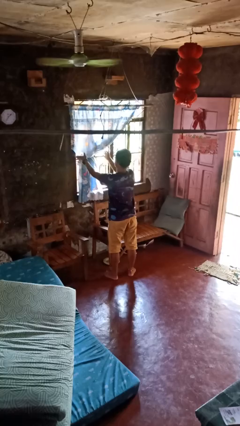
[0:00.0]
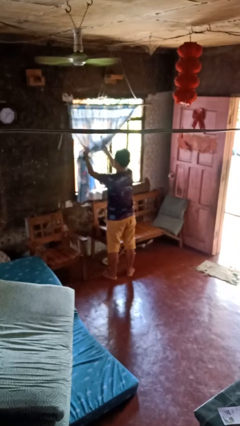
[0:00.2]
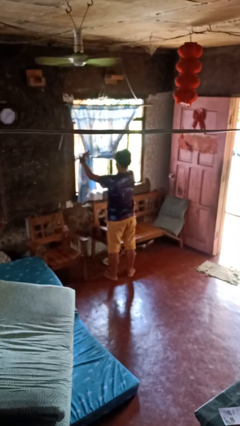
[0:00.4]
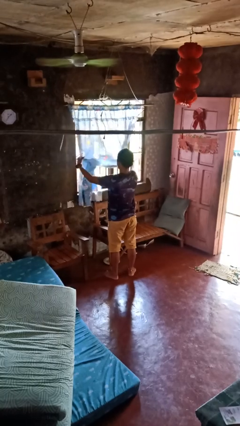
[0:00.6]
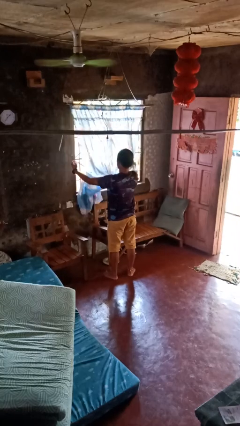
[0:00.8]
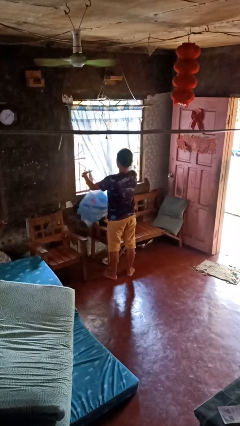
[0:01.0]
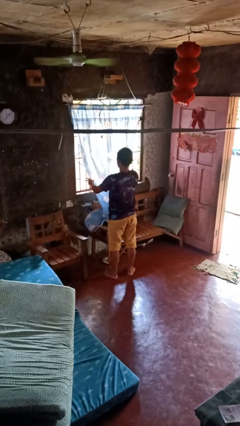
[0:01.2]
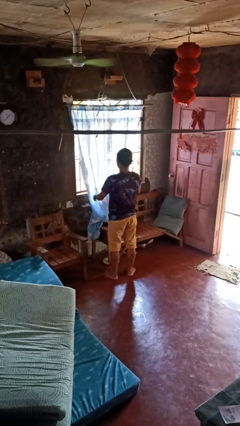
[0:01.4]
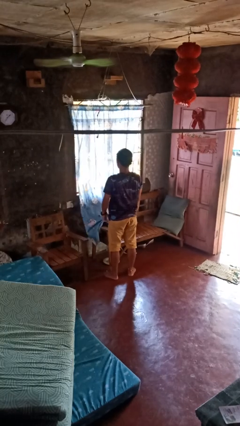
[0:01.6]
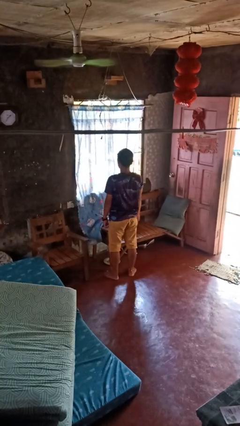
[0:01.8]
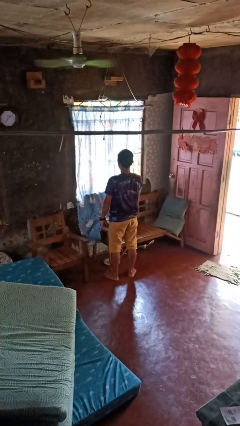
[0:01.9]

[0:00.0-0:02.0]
person closes curtains

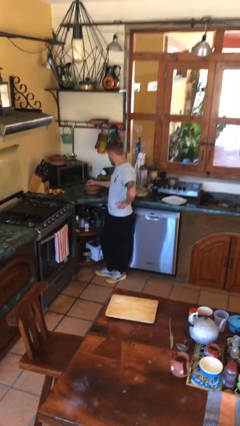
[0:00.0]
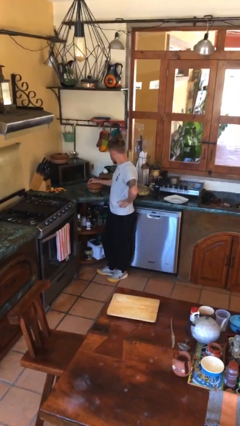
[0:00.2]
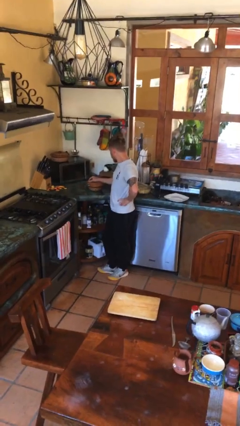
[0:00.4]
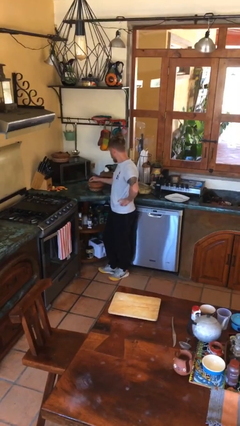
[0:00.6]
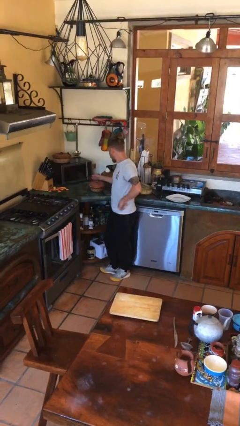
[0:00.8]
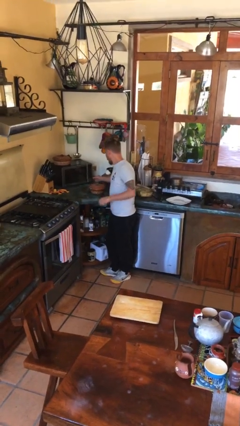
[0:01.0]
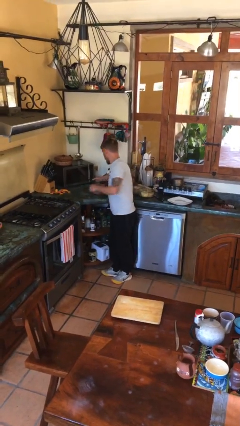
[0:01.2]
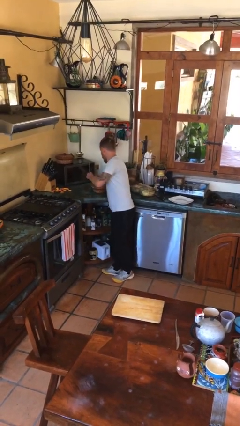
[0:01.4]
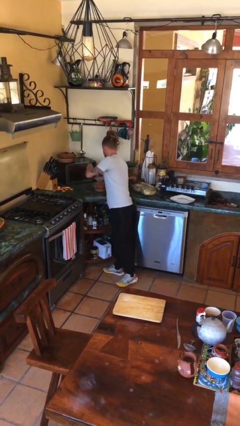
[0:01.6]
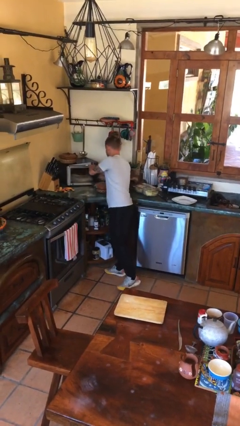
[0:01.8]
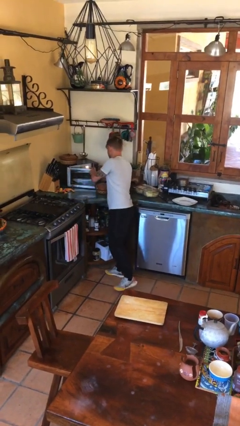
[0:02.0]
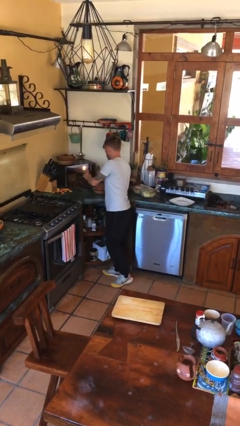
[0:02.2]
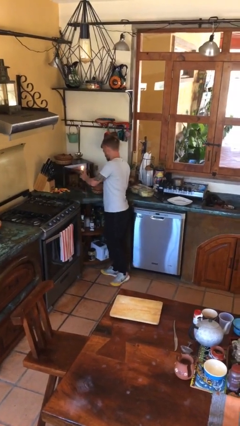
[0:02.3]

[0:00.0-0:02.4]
person opens microwave

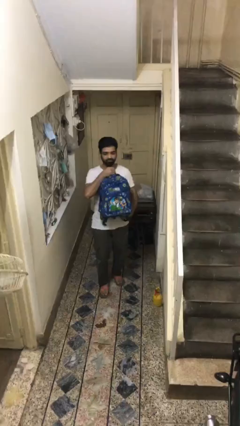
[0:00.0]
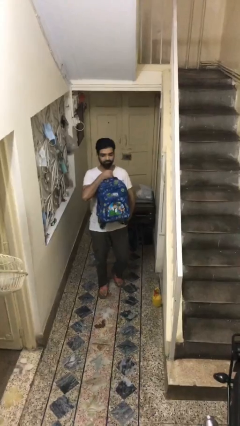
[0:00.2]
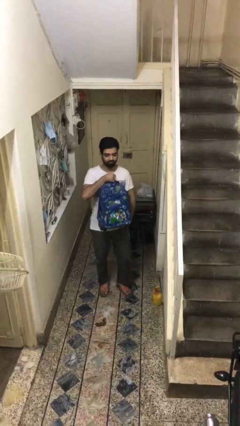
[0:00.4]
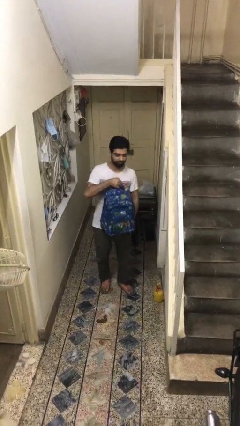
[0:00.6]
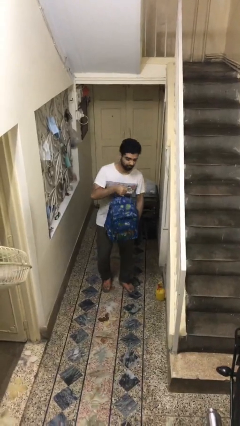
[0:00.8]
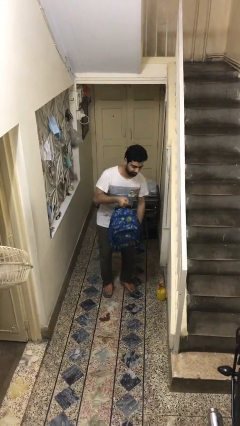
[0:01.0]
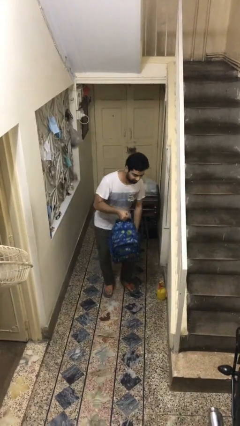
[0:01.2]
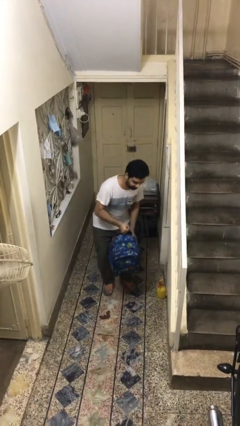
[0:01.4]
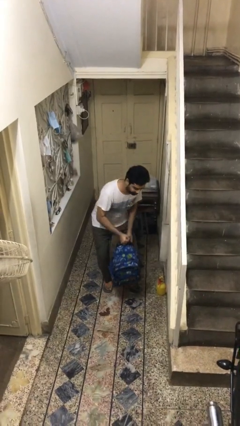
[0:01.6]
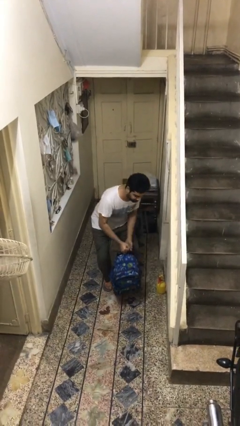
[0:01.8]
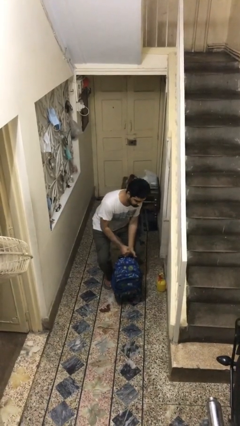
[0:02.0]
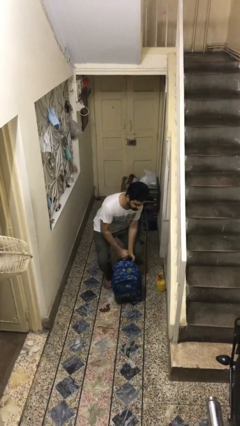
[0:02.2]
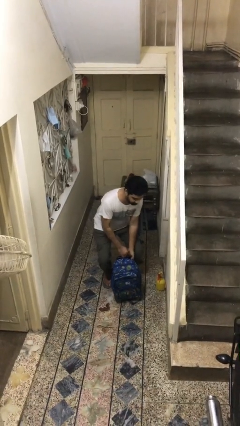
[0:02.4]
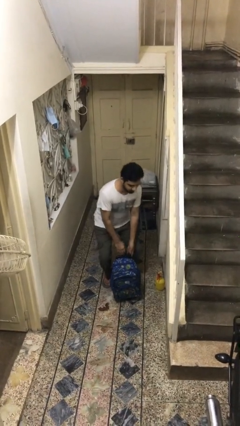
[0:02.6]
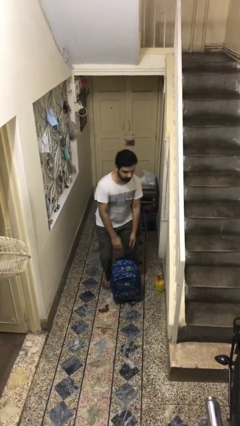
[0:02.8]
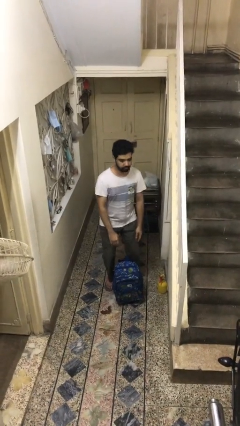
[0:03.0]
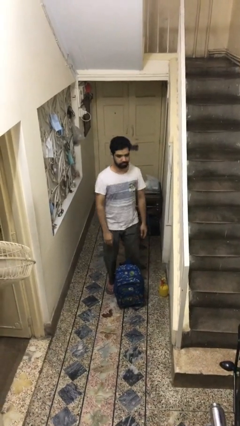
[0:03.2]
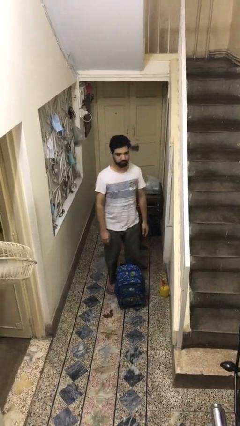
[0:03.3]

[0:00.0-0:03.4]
person puts down object on floor

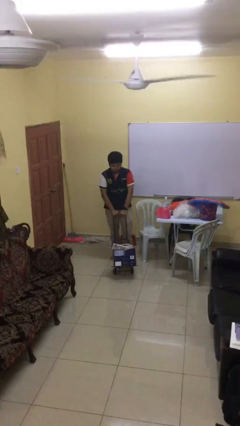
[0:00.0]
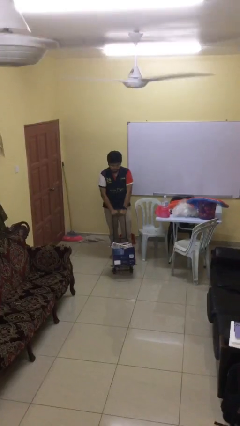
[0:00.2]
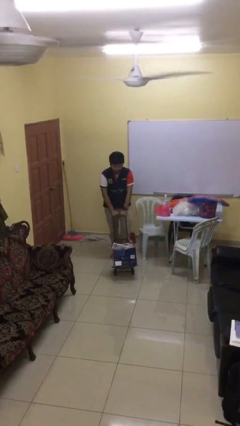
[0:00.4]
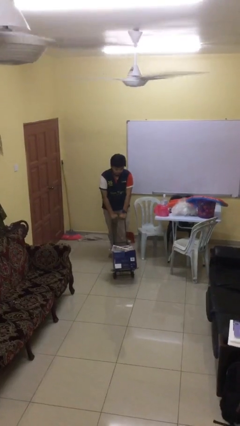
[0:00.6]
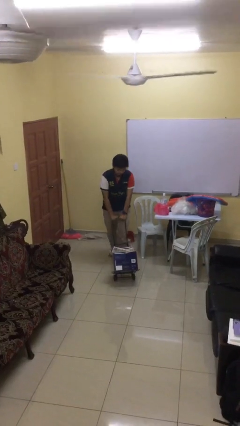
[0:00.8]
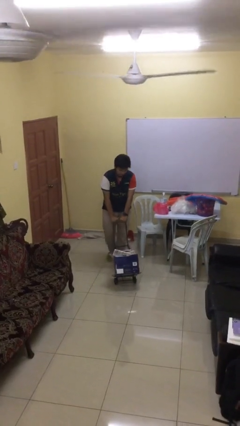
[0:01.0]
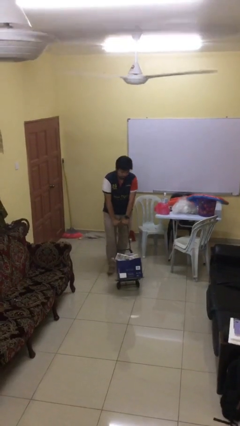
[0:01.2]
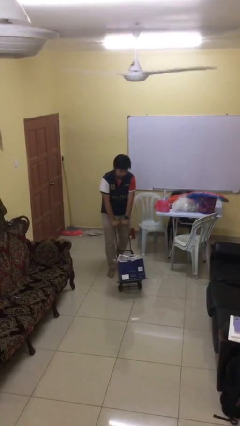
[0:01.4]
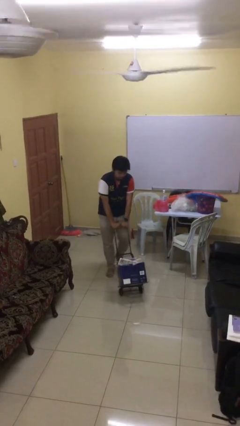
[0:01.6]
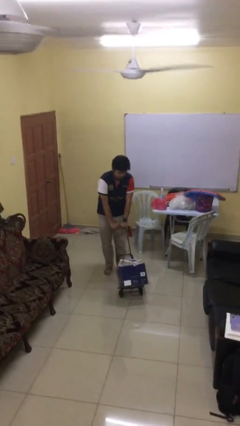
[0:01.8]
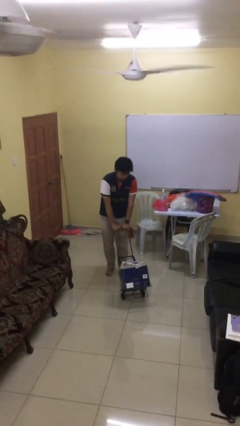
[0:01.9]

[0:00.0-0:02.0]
person pushes wheeled cart

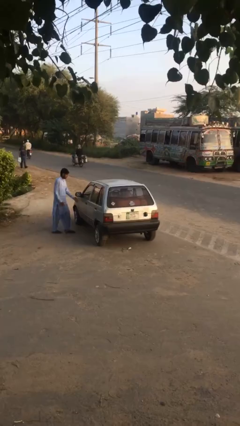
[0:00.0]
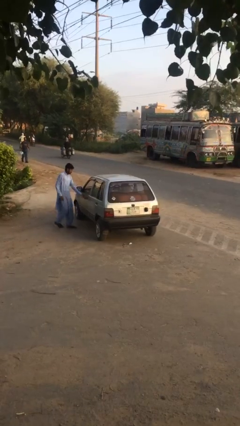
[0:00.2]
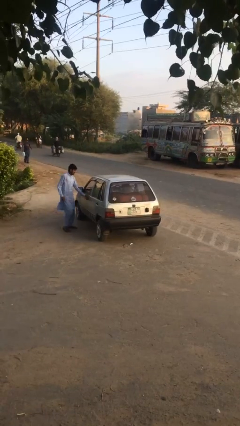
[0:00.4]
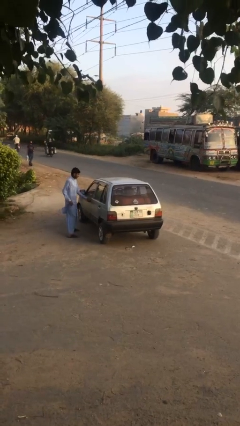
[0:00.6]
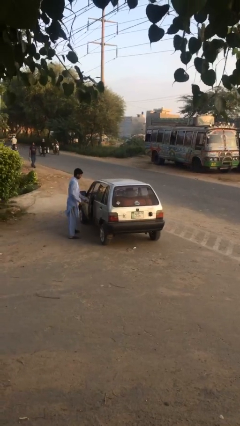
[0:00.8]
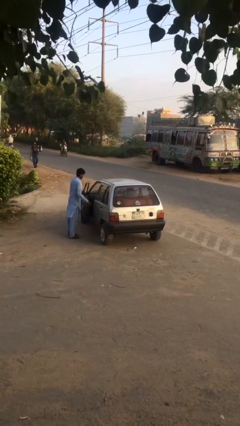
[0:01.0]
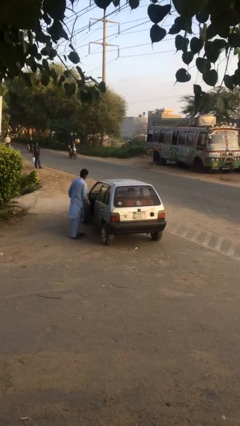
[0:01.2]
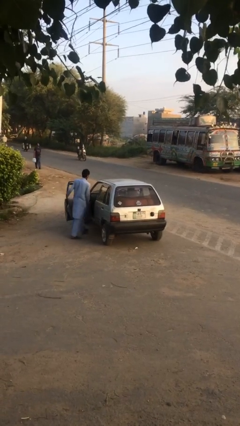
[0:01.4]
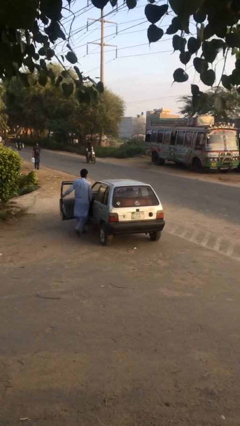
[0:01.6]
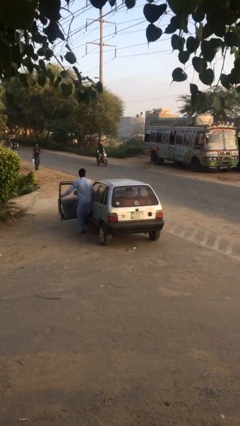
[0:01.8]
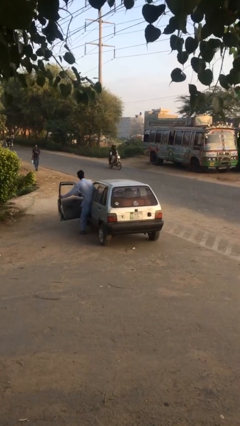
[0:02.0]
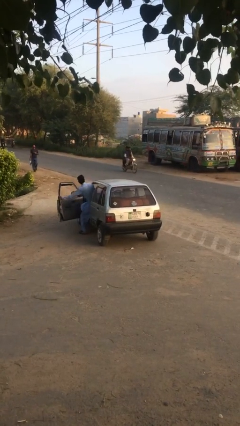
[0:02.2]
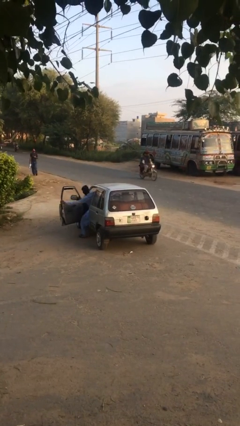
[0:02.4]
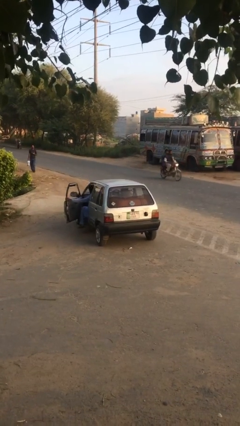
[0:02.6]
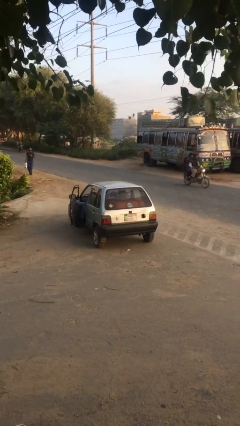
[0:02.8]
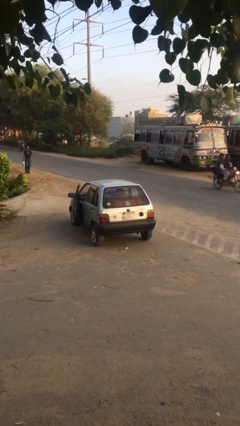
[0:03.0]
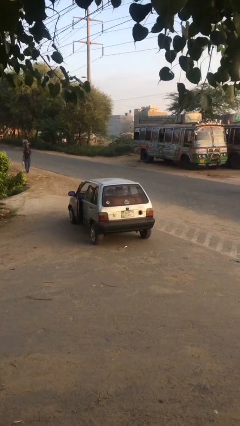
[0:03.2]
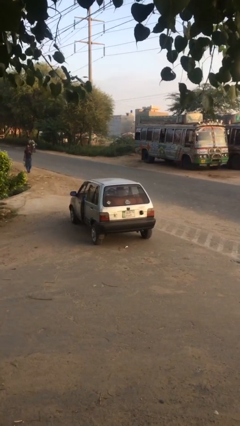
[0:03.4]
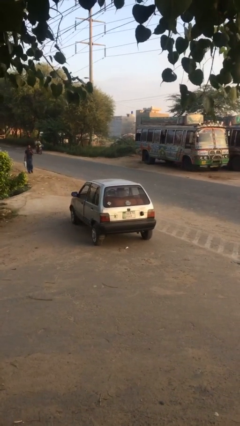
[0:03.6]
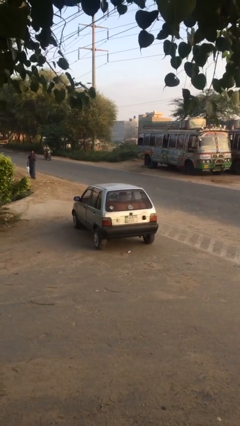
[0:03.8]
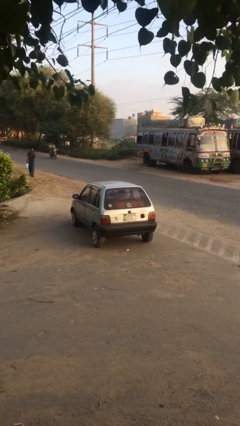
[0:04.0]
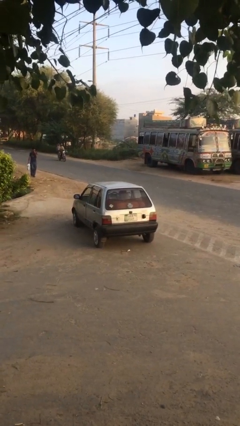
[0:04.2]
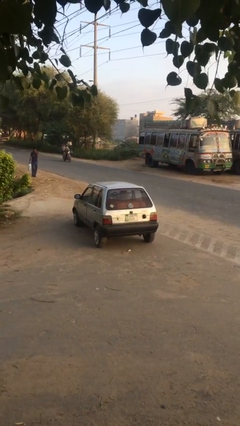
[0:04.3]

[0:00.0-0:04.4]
car picks up person

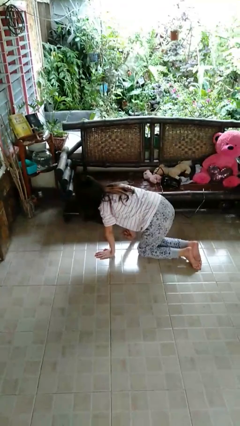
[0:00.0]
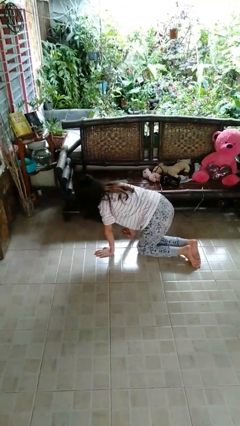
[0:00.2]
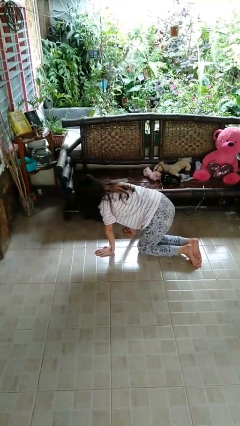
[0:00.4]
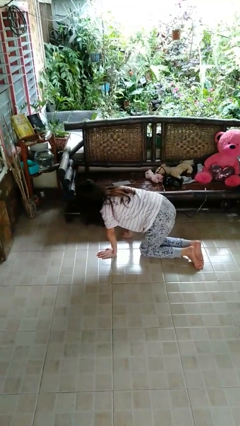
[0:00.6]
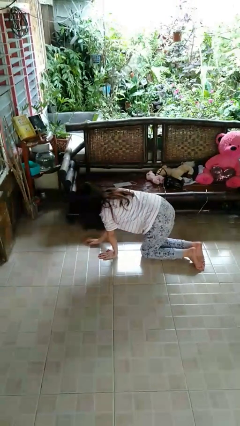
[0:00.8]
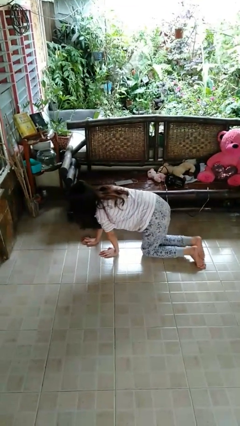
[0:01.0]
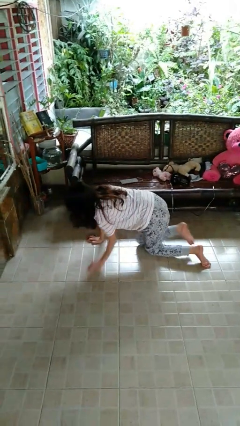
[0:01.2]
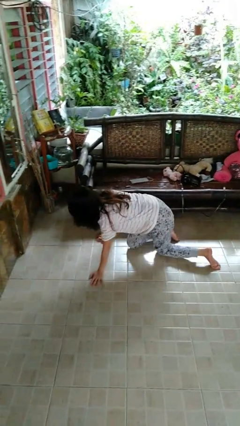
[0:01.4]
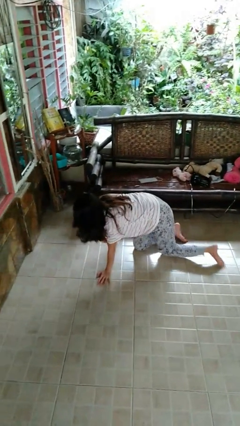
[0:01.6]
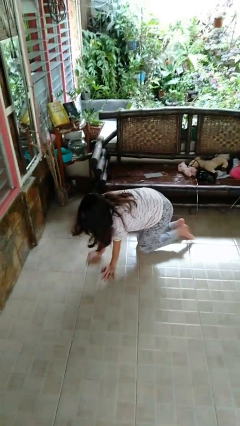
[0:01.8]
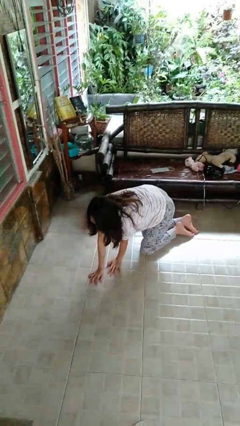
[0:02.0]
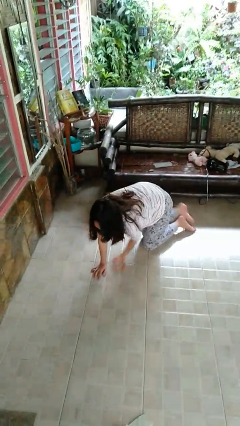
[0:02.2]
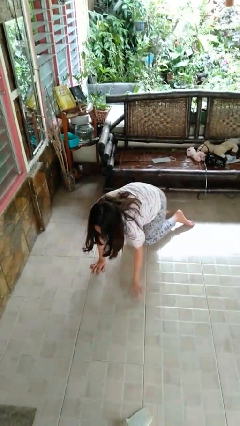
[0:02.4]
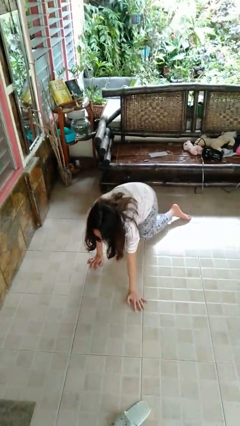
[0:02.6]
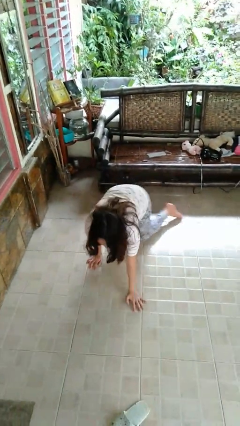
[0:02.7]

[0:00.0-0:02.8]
person crawls

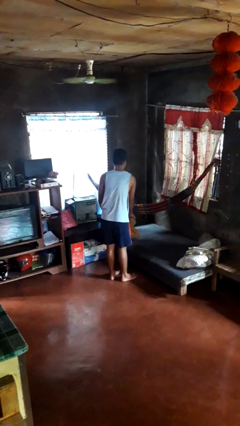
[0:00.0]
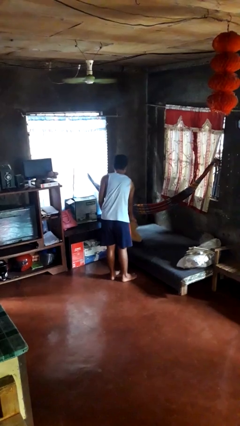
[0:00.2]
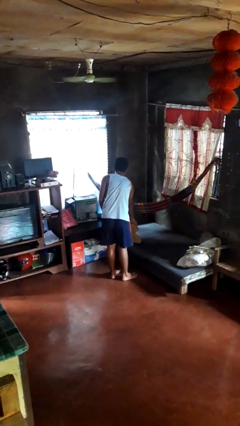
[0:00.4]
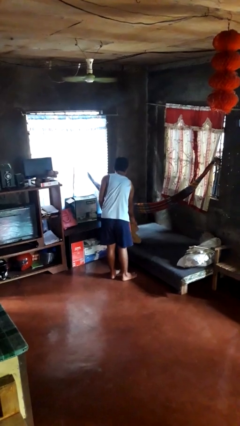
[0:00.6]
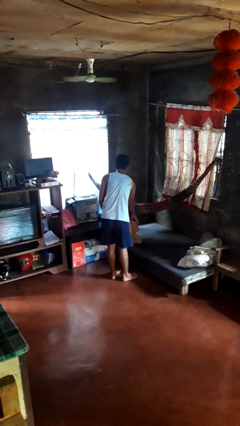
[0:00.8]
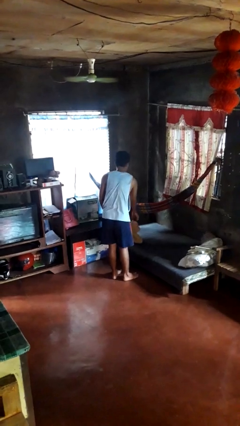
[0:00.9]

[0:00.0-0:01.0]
person puts down object on bed
